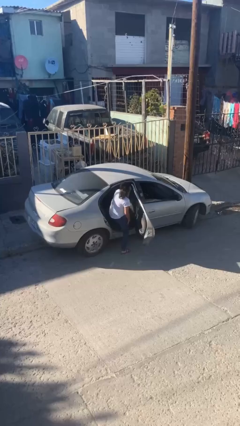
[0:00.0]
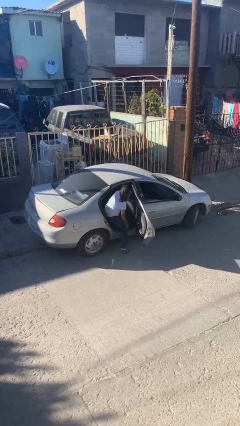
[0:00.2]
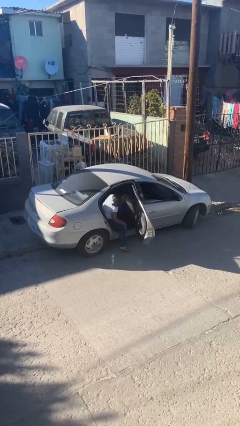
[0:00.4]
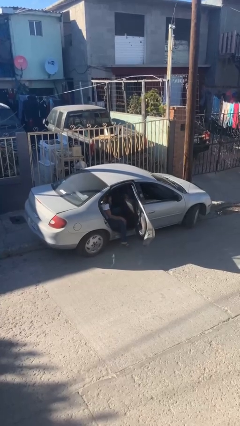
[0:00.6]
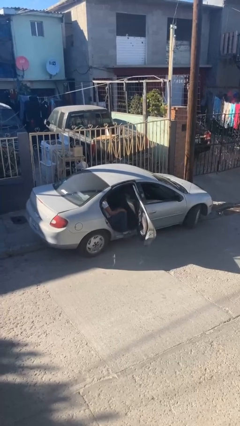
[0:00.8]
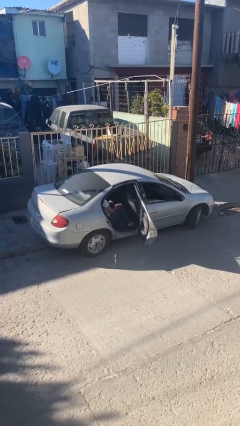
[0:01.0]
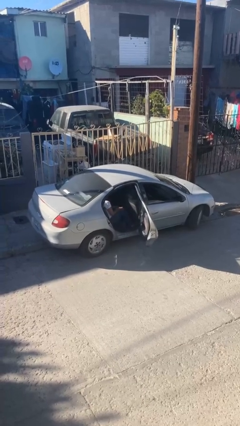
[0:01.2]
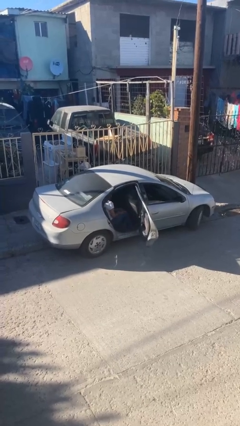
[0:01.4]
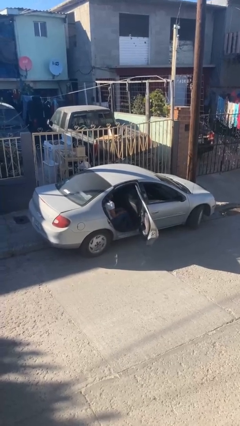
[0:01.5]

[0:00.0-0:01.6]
person enters car

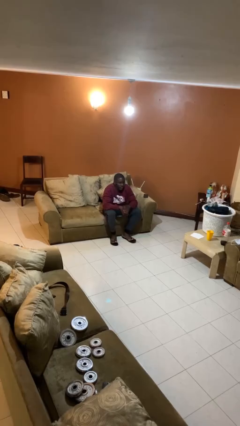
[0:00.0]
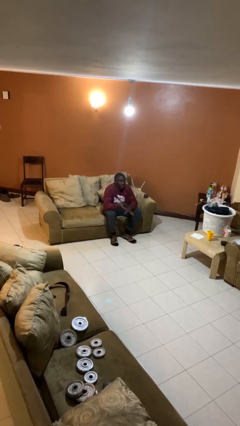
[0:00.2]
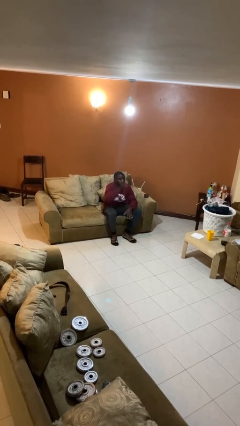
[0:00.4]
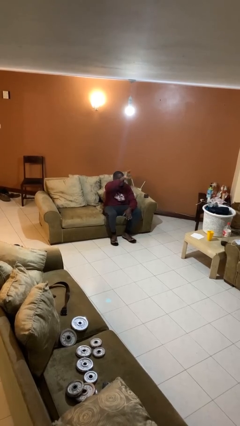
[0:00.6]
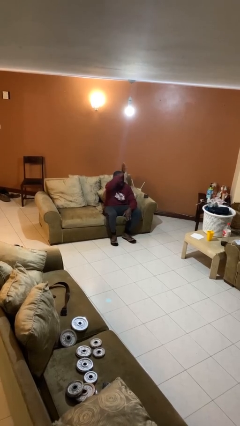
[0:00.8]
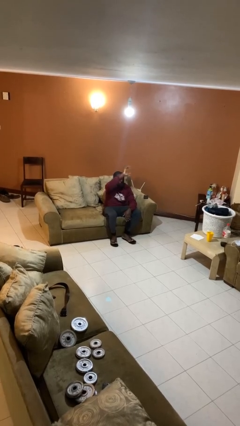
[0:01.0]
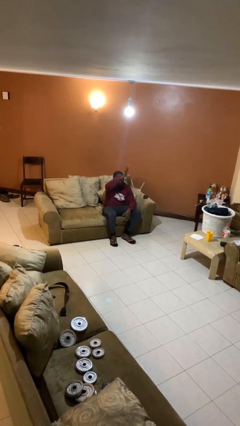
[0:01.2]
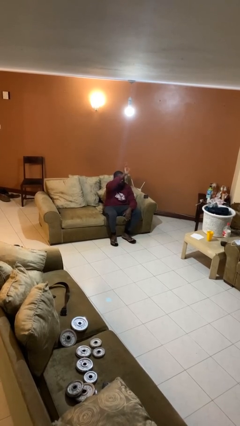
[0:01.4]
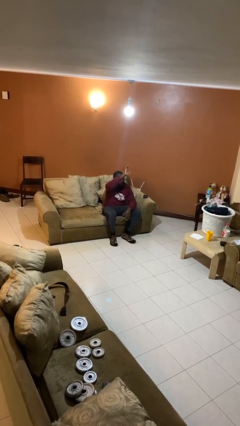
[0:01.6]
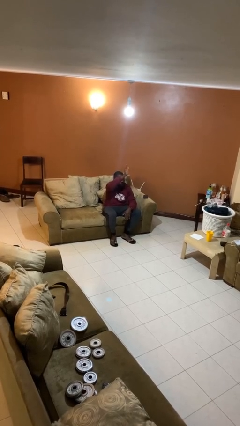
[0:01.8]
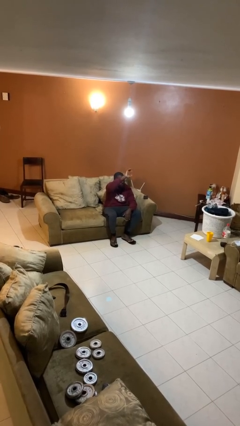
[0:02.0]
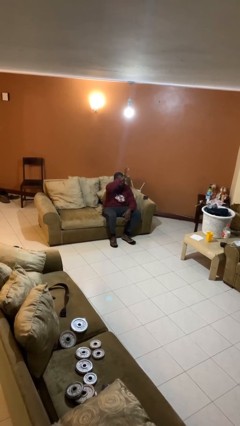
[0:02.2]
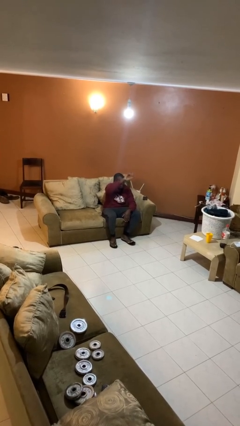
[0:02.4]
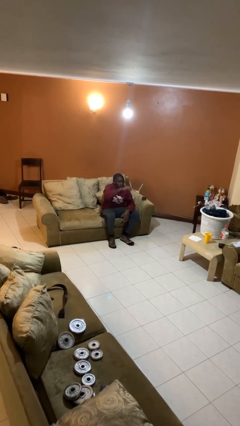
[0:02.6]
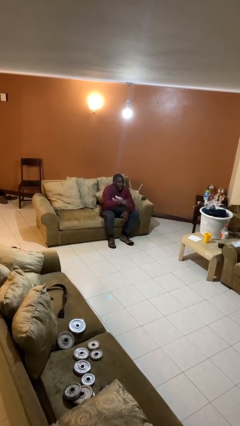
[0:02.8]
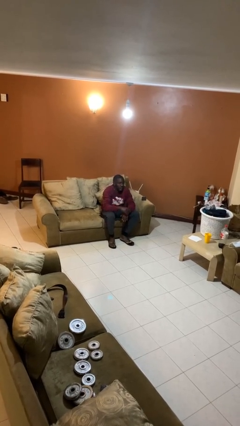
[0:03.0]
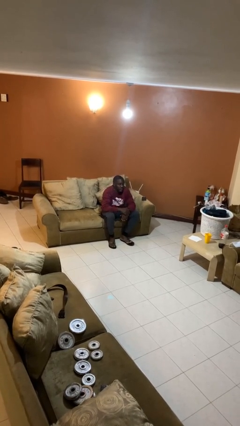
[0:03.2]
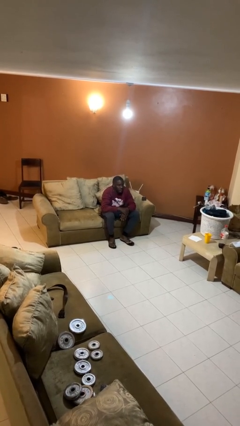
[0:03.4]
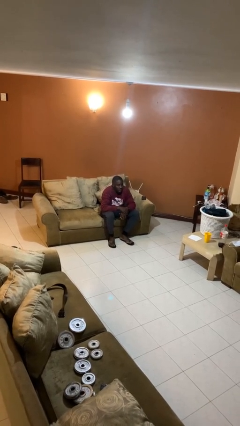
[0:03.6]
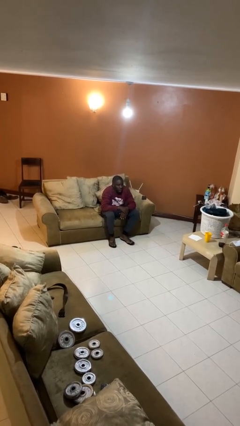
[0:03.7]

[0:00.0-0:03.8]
person waves at person

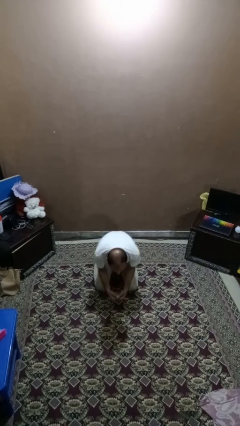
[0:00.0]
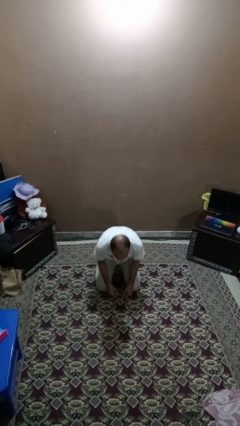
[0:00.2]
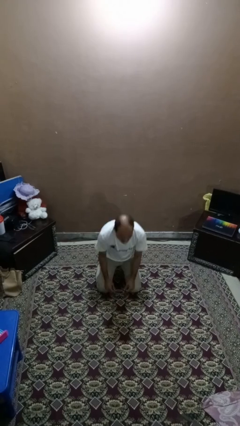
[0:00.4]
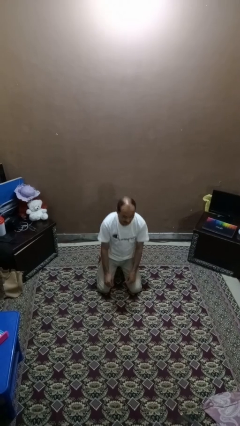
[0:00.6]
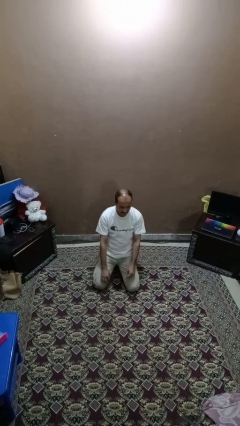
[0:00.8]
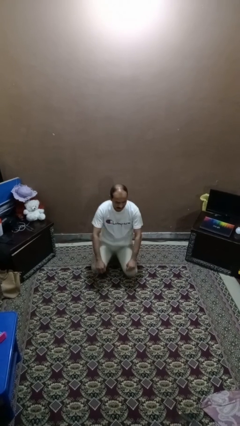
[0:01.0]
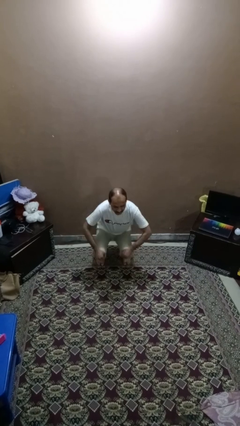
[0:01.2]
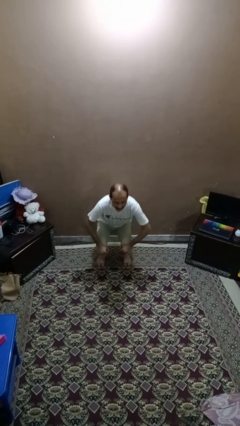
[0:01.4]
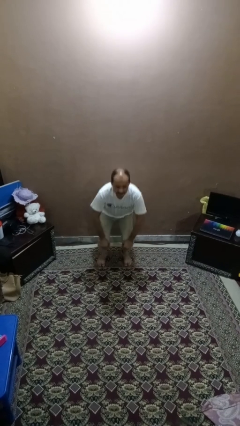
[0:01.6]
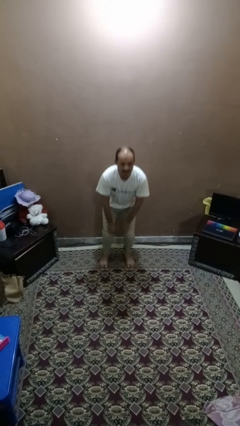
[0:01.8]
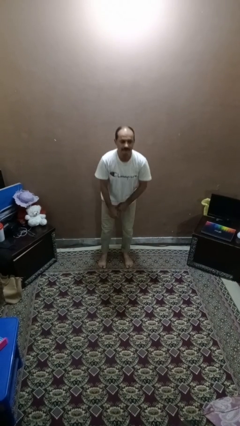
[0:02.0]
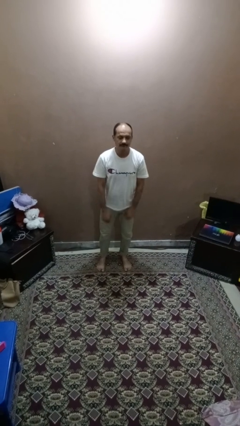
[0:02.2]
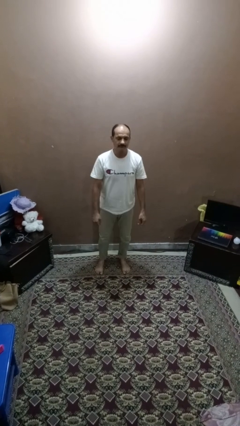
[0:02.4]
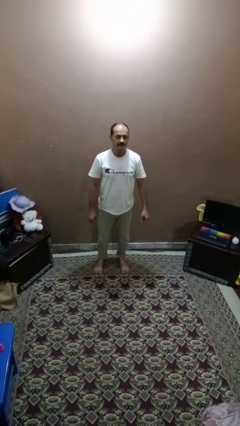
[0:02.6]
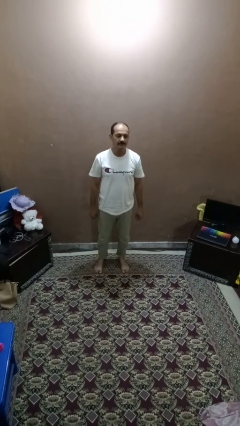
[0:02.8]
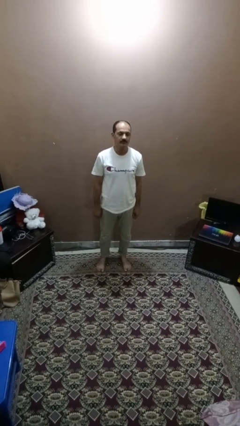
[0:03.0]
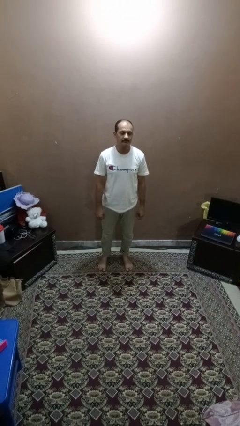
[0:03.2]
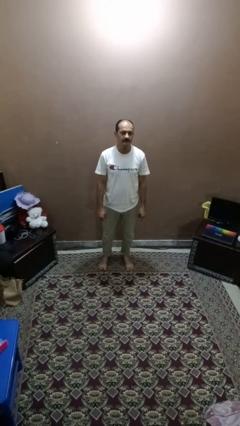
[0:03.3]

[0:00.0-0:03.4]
person stands up from floor

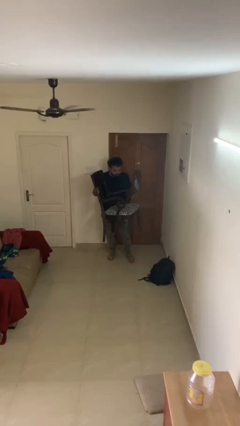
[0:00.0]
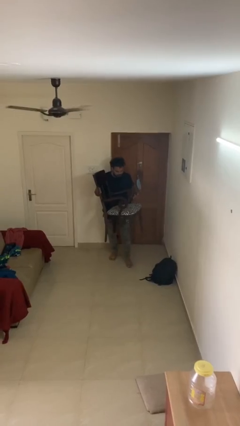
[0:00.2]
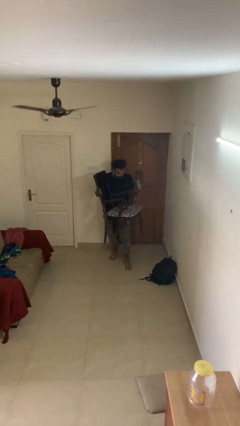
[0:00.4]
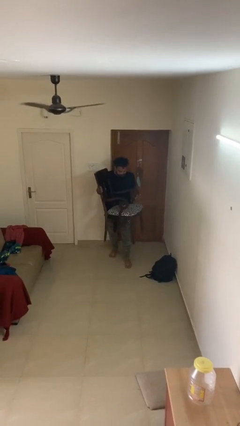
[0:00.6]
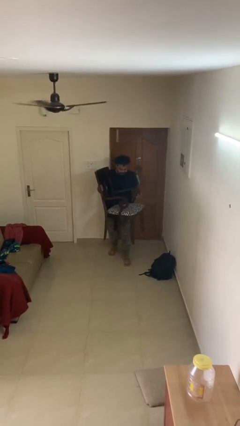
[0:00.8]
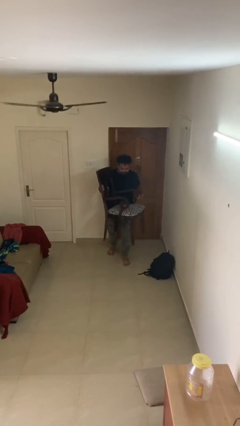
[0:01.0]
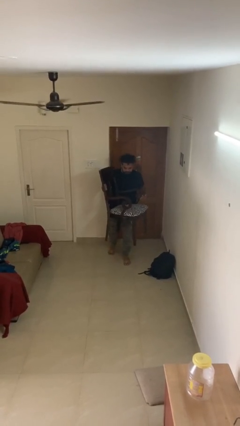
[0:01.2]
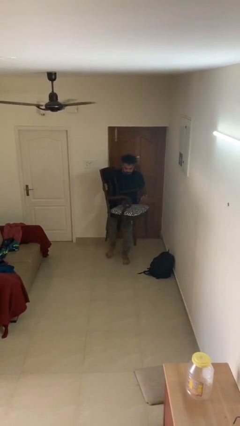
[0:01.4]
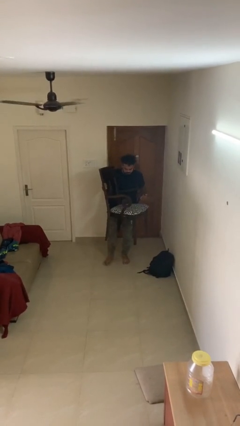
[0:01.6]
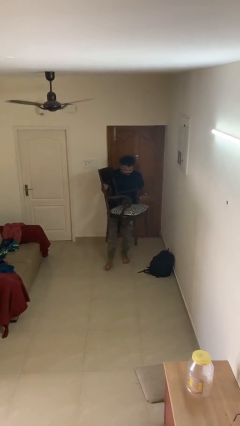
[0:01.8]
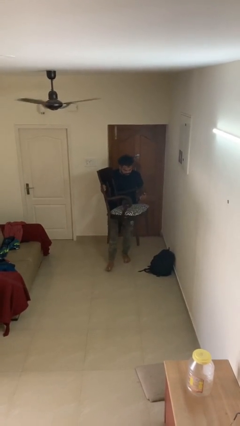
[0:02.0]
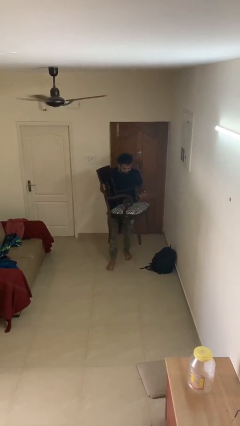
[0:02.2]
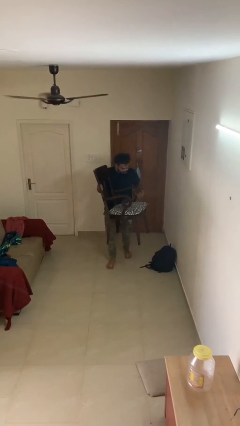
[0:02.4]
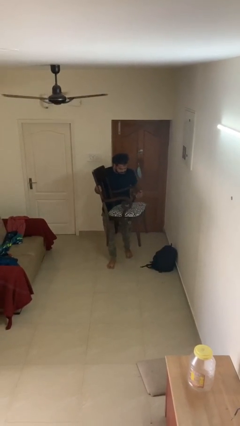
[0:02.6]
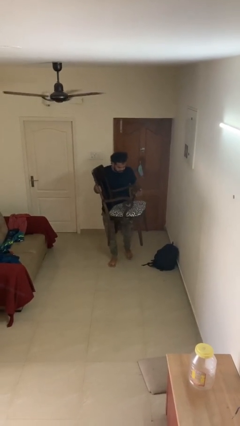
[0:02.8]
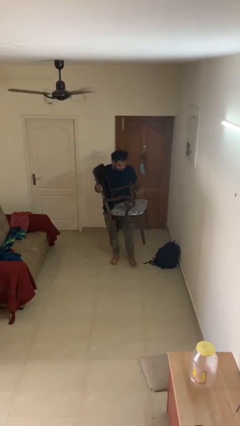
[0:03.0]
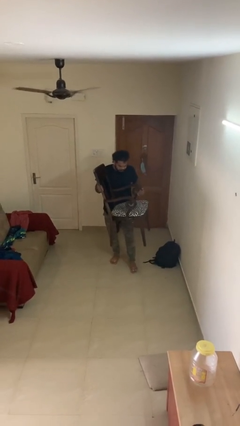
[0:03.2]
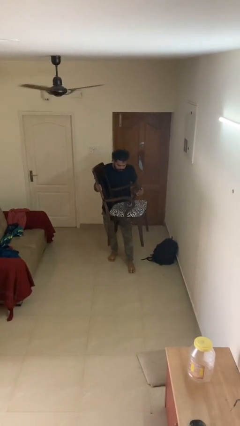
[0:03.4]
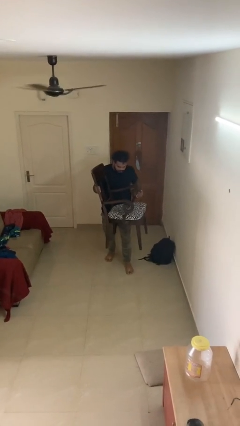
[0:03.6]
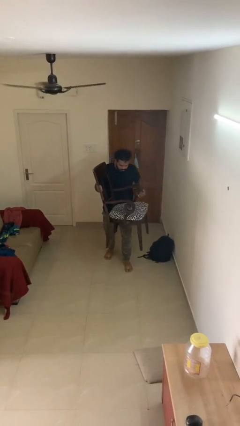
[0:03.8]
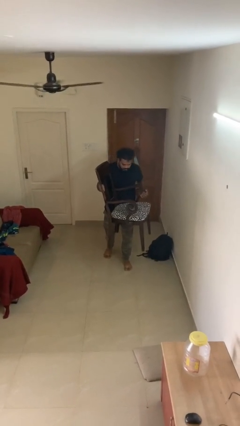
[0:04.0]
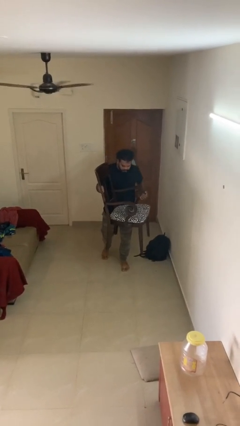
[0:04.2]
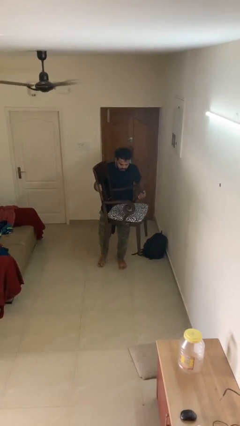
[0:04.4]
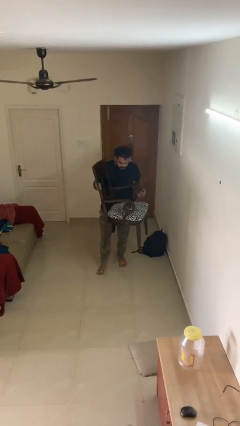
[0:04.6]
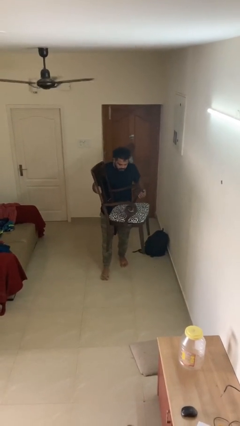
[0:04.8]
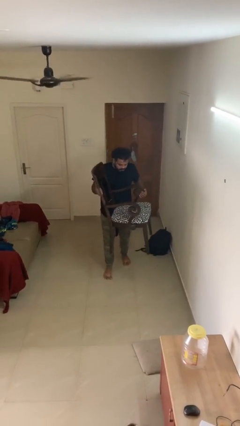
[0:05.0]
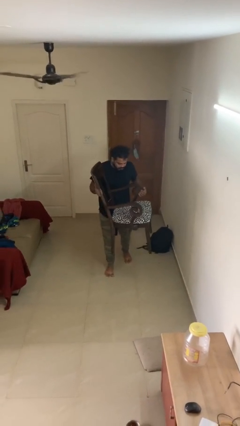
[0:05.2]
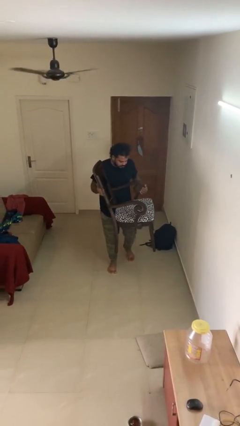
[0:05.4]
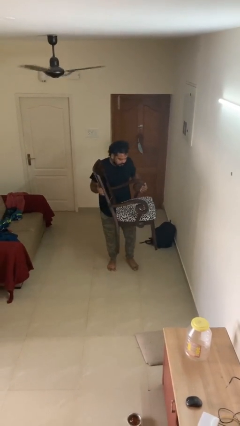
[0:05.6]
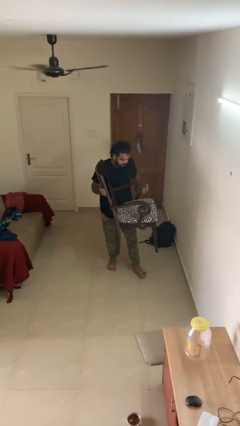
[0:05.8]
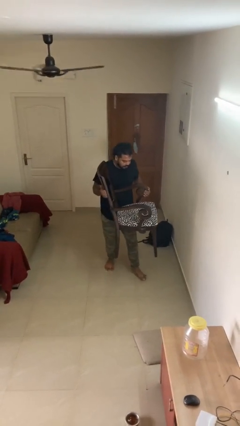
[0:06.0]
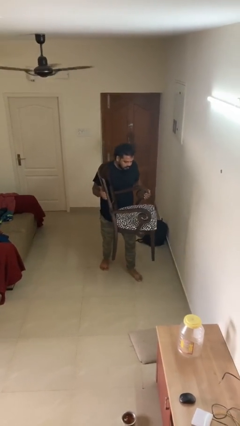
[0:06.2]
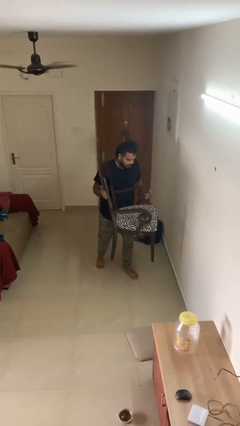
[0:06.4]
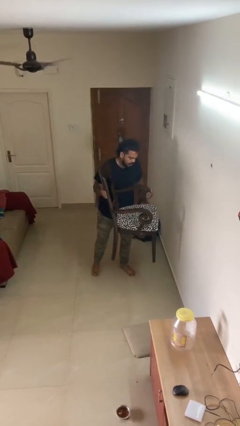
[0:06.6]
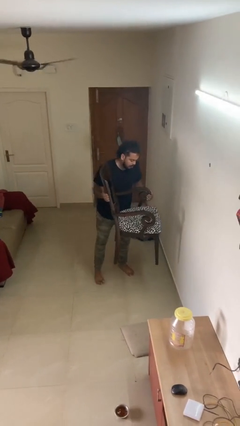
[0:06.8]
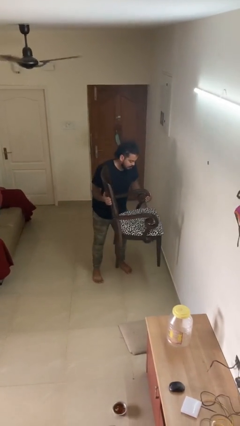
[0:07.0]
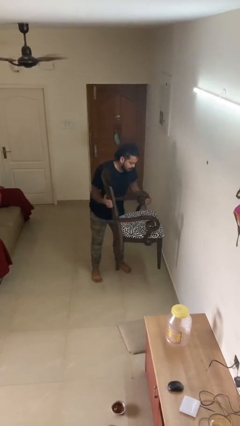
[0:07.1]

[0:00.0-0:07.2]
person carries heavy object

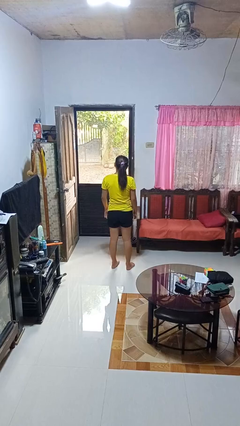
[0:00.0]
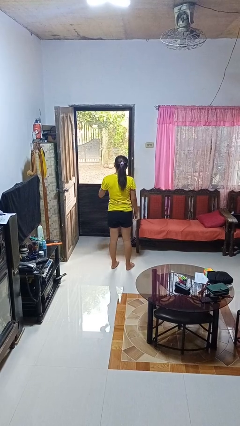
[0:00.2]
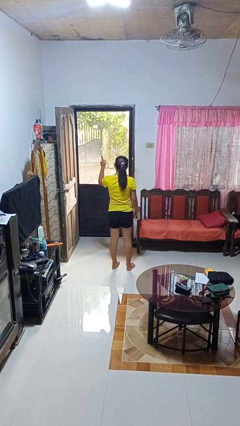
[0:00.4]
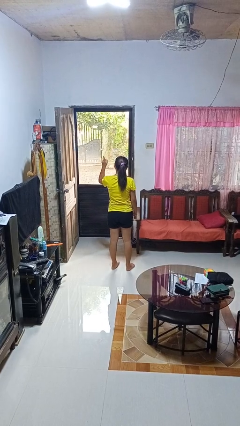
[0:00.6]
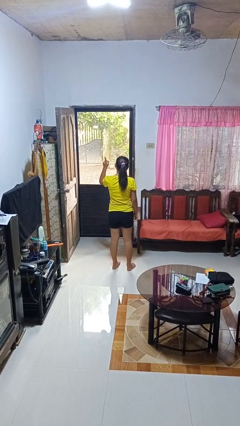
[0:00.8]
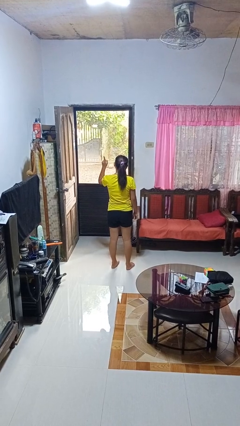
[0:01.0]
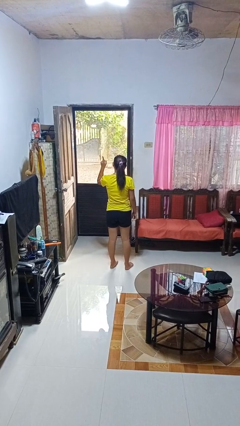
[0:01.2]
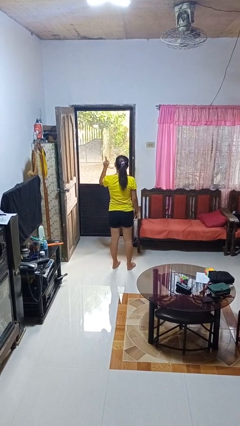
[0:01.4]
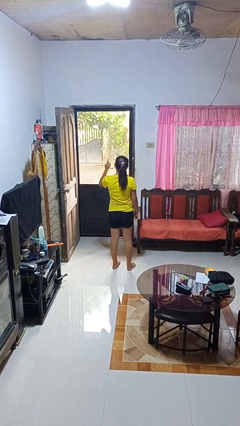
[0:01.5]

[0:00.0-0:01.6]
person gestures number one
